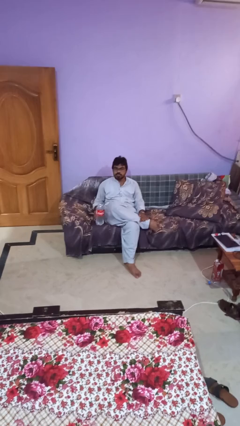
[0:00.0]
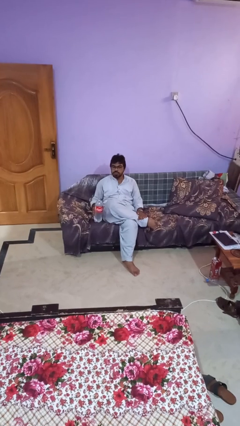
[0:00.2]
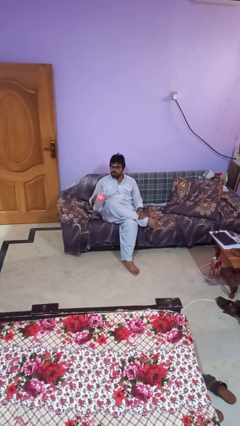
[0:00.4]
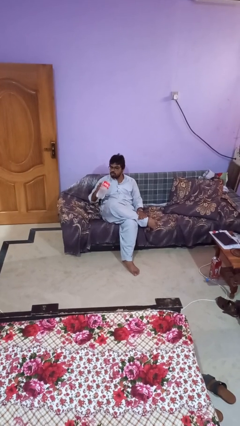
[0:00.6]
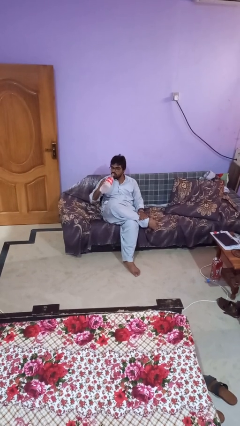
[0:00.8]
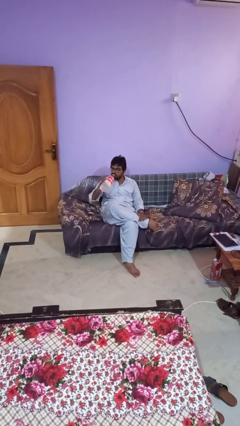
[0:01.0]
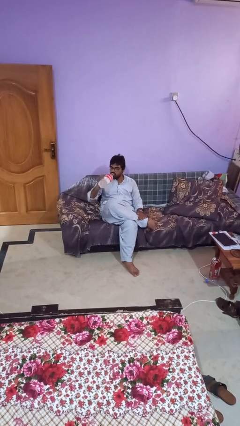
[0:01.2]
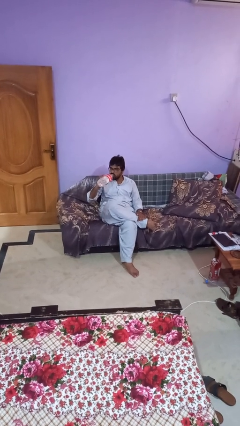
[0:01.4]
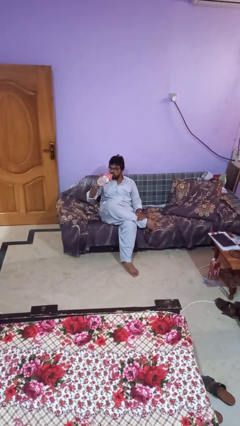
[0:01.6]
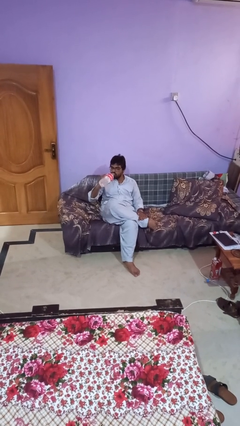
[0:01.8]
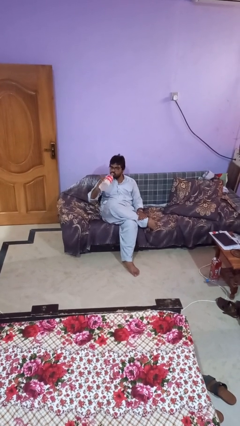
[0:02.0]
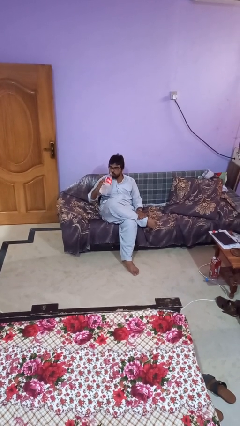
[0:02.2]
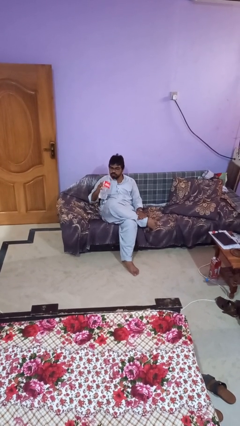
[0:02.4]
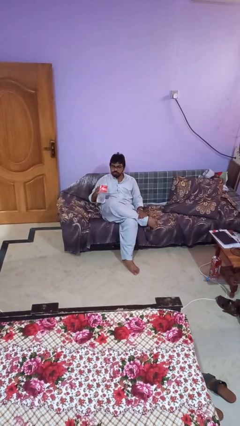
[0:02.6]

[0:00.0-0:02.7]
person drinks from bottle

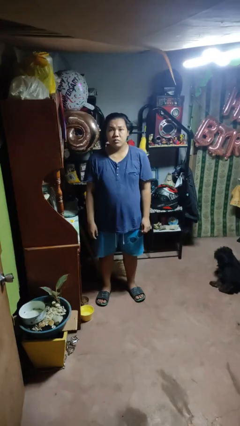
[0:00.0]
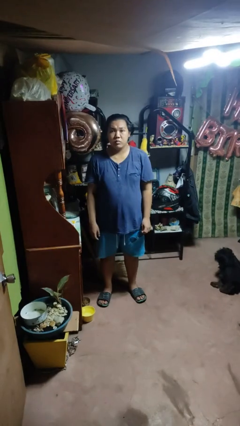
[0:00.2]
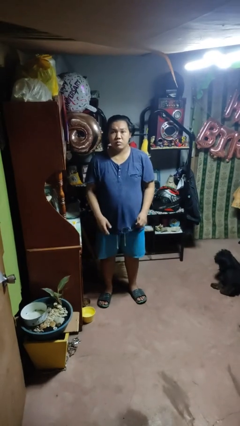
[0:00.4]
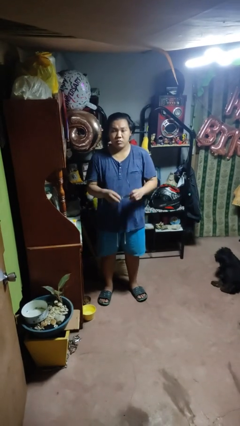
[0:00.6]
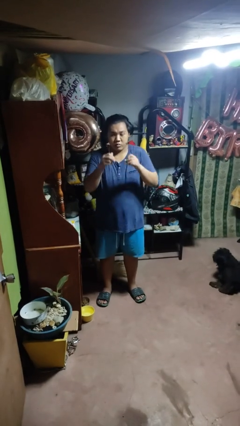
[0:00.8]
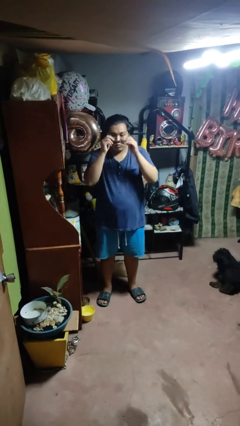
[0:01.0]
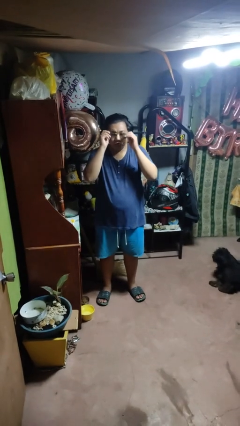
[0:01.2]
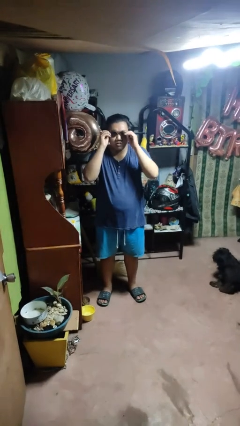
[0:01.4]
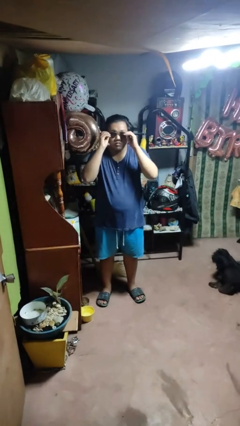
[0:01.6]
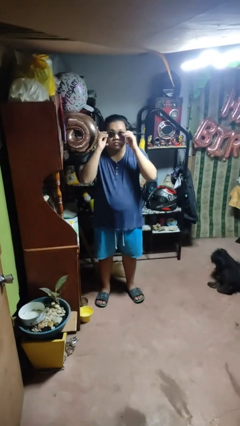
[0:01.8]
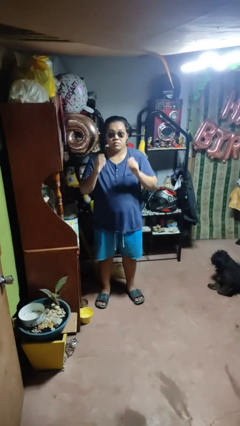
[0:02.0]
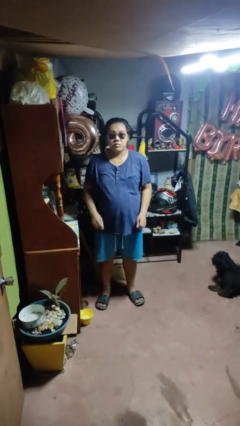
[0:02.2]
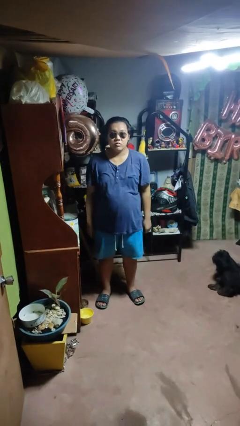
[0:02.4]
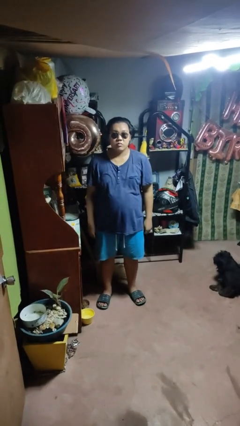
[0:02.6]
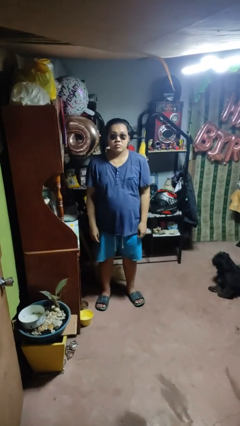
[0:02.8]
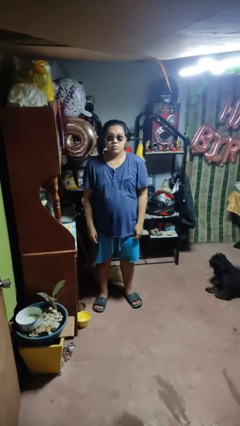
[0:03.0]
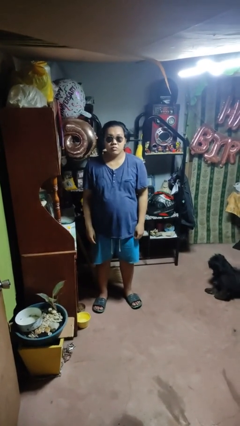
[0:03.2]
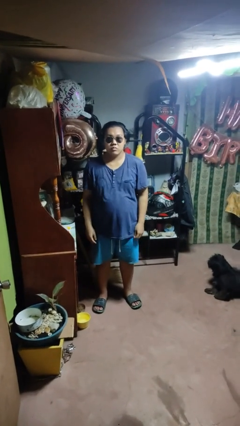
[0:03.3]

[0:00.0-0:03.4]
person puts on sunglasses

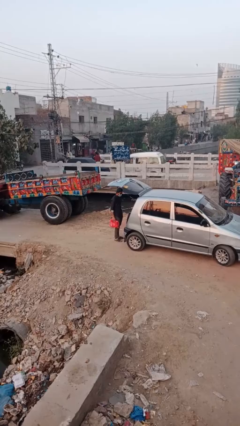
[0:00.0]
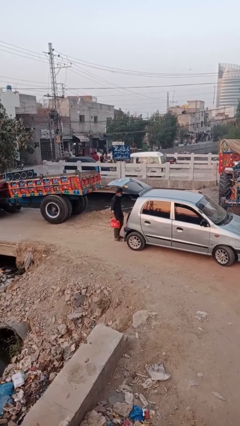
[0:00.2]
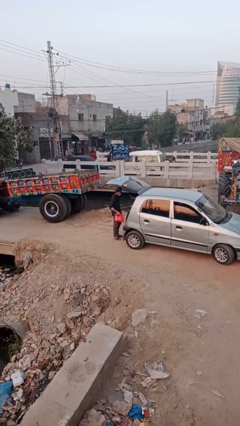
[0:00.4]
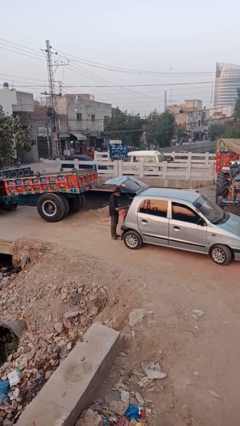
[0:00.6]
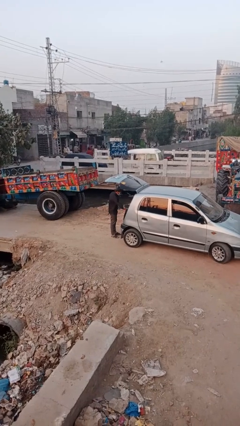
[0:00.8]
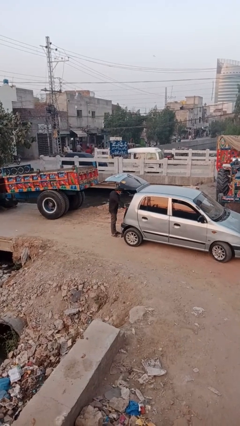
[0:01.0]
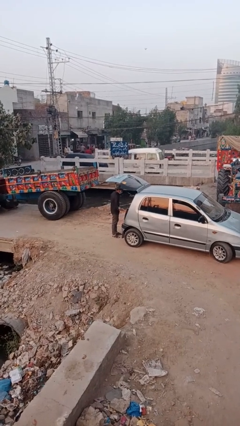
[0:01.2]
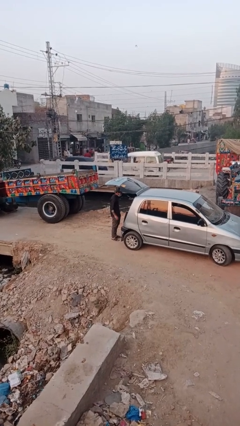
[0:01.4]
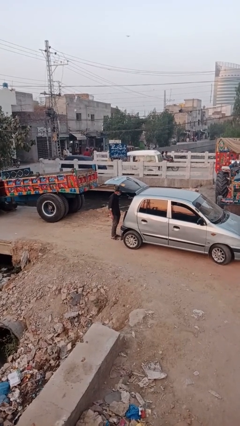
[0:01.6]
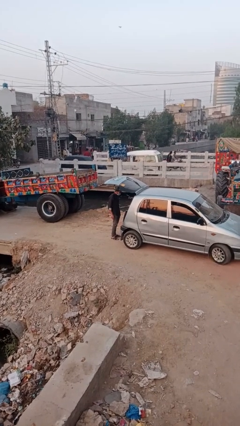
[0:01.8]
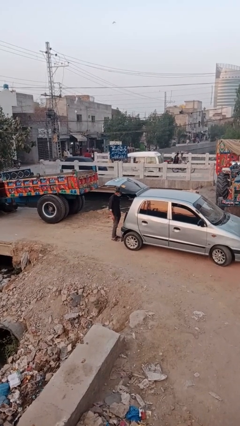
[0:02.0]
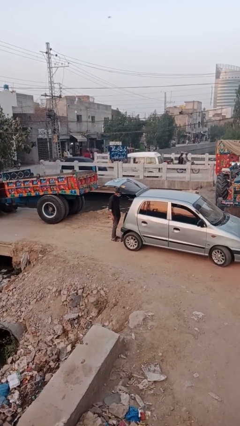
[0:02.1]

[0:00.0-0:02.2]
person loads car

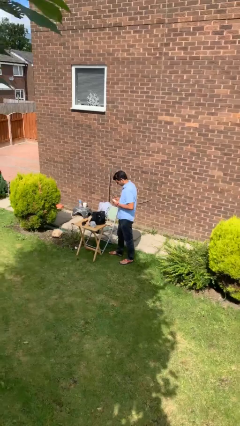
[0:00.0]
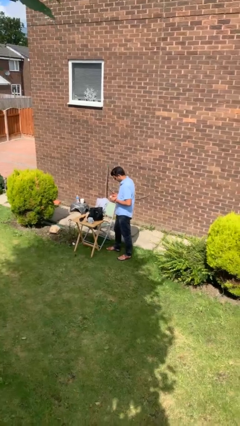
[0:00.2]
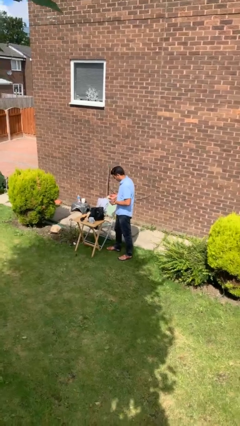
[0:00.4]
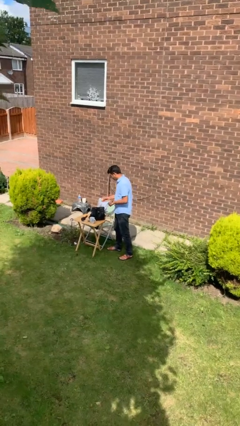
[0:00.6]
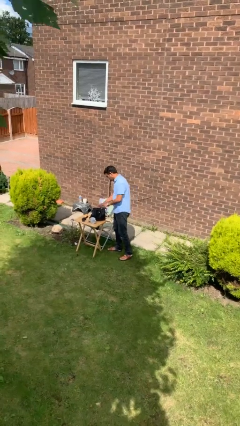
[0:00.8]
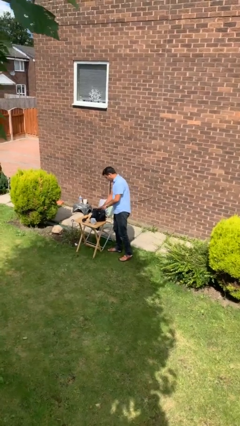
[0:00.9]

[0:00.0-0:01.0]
person puts object into backpack

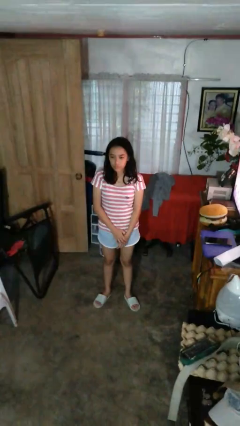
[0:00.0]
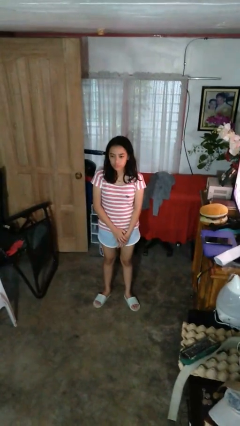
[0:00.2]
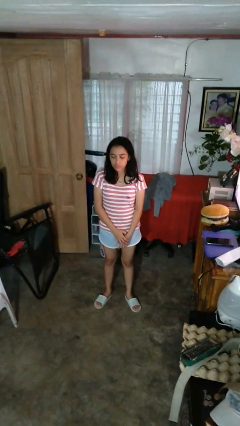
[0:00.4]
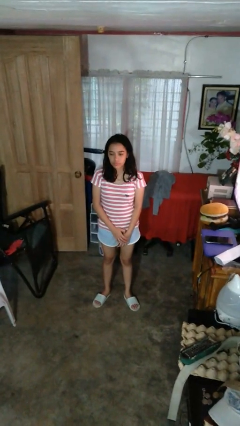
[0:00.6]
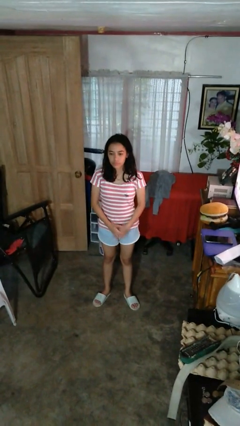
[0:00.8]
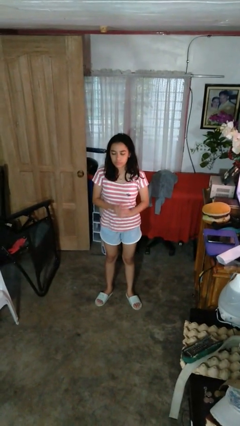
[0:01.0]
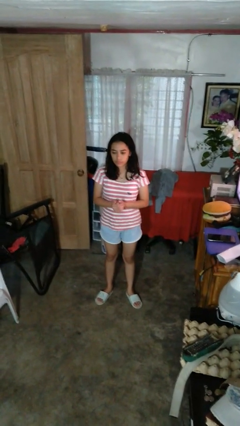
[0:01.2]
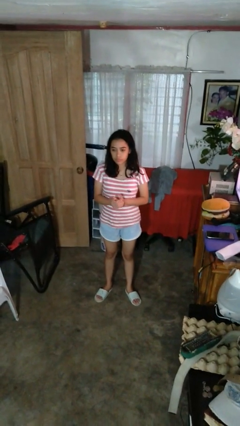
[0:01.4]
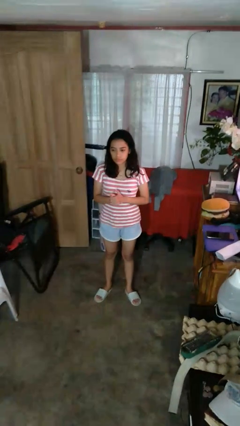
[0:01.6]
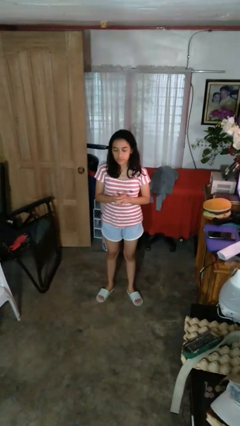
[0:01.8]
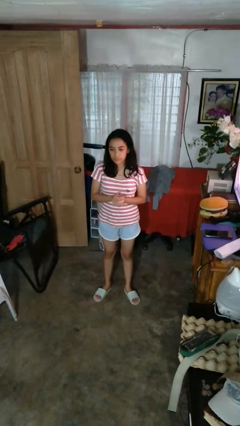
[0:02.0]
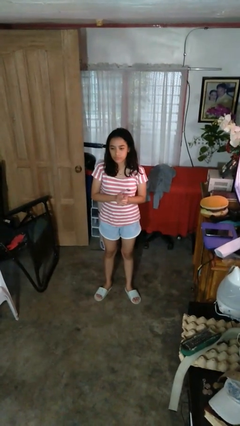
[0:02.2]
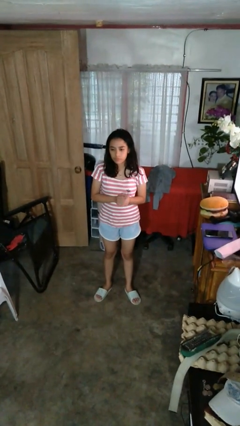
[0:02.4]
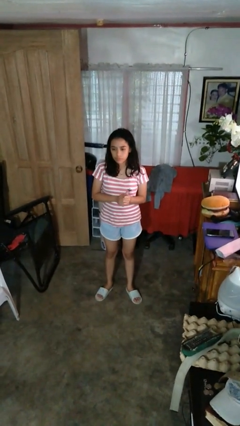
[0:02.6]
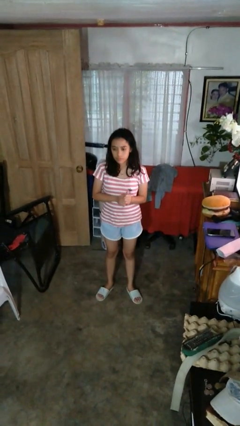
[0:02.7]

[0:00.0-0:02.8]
person cracks knuckles

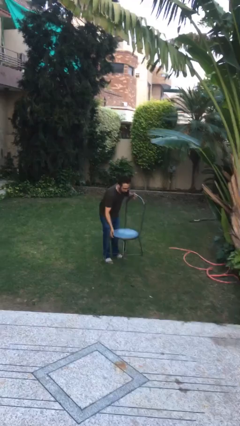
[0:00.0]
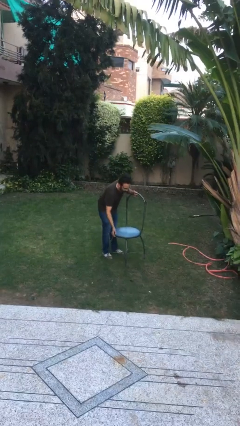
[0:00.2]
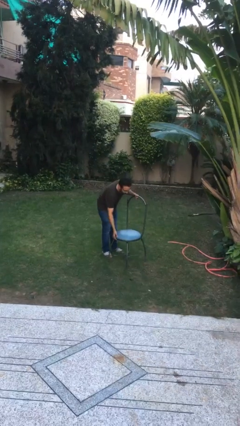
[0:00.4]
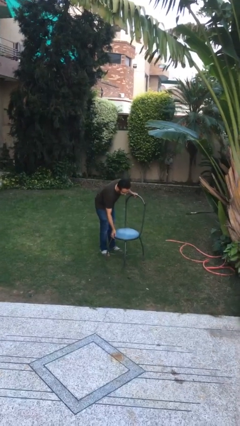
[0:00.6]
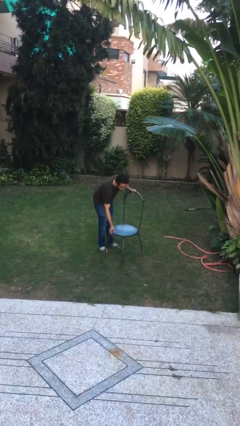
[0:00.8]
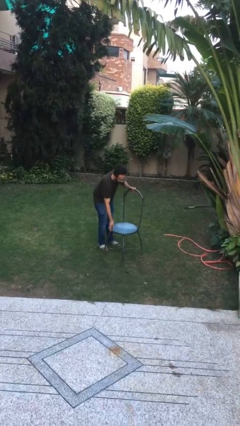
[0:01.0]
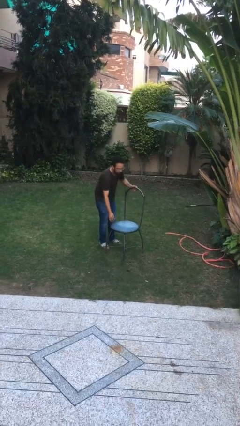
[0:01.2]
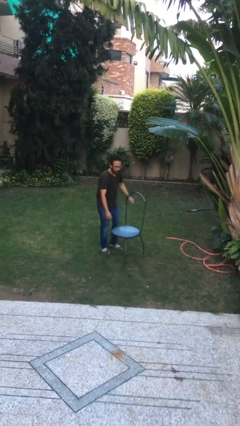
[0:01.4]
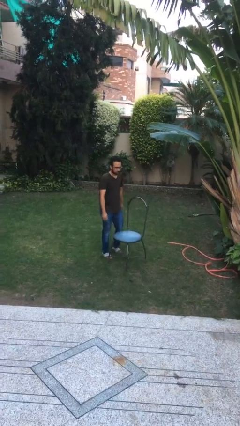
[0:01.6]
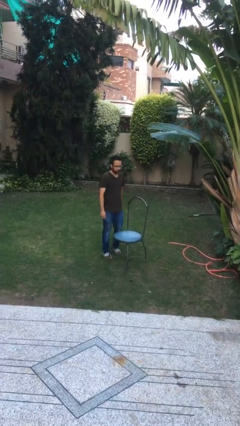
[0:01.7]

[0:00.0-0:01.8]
person puts down object on floor

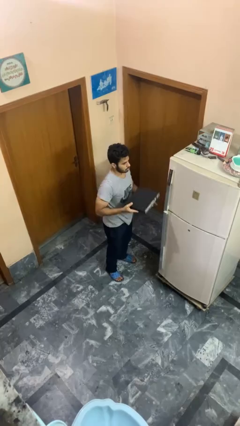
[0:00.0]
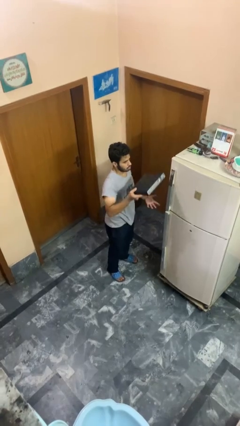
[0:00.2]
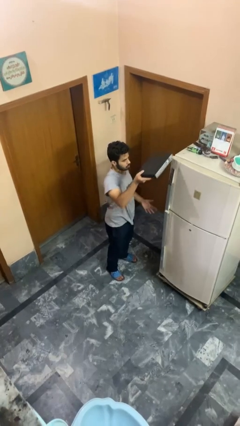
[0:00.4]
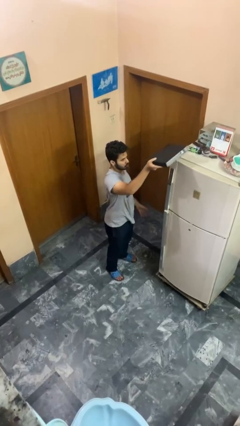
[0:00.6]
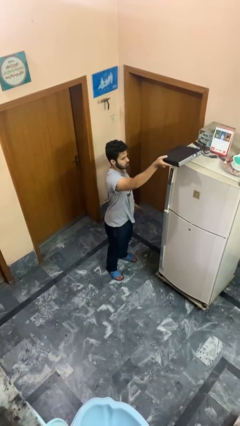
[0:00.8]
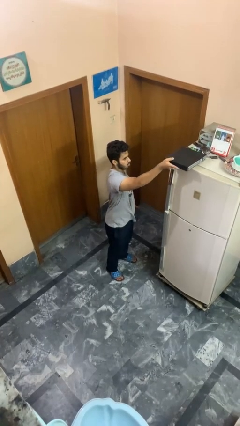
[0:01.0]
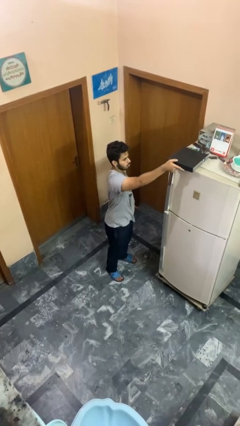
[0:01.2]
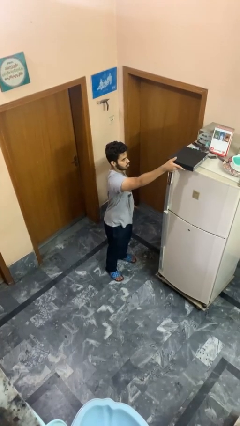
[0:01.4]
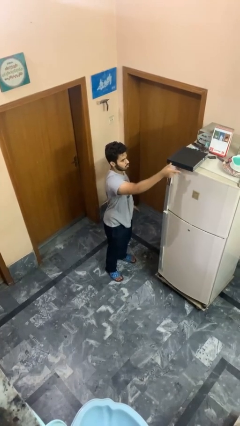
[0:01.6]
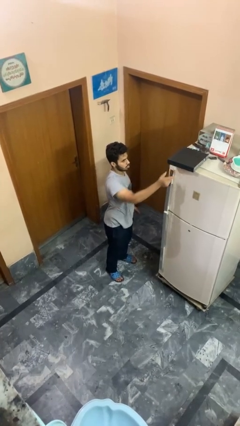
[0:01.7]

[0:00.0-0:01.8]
person puts down object on countertop

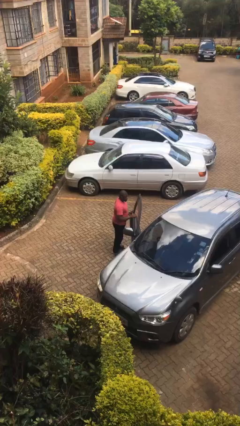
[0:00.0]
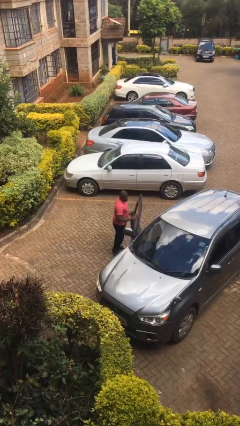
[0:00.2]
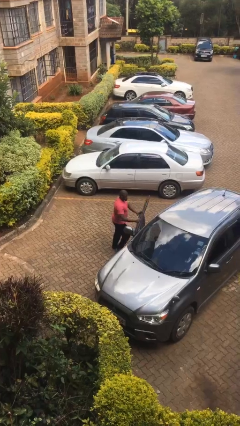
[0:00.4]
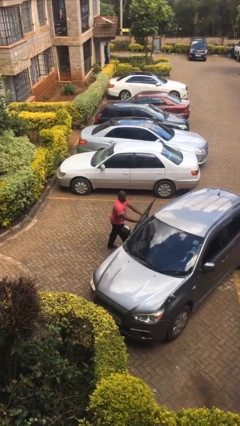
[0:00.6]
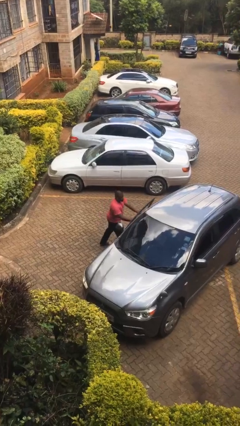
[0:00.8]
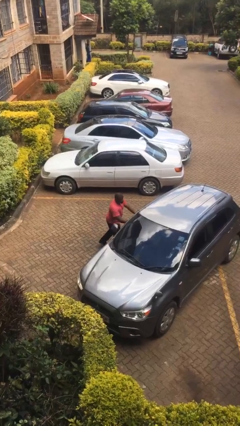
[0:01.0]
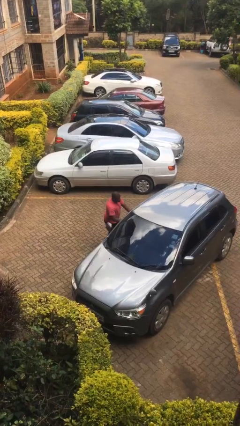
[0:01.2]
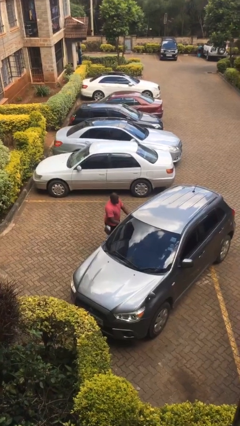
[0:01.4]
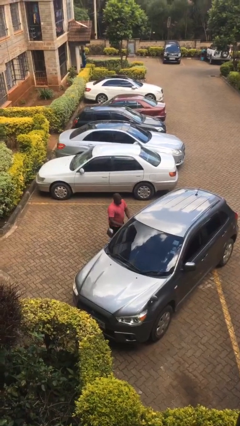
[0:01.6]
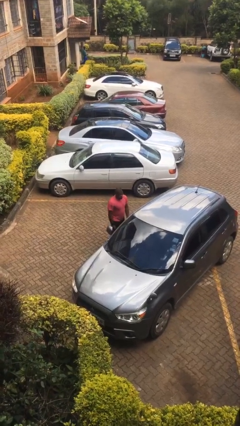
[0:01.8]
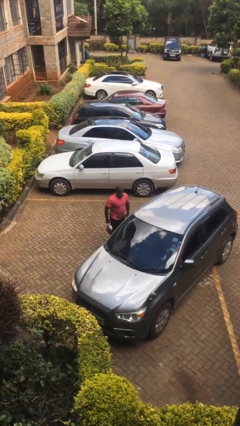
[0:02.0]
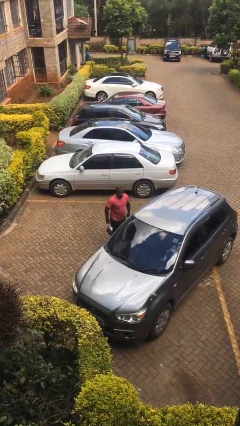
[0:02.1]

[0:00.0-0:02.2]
person closes car door
